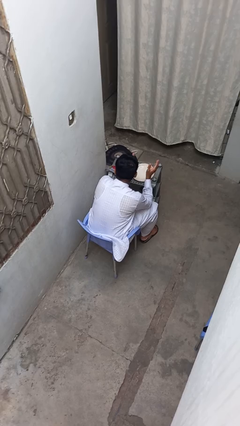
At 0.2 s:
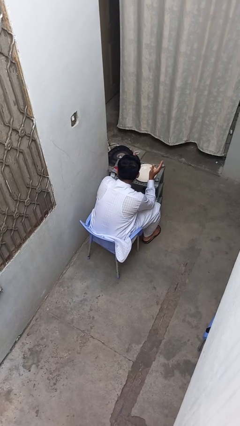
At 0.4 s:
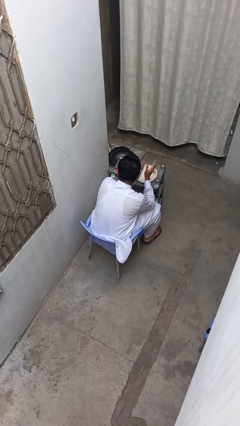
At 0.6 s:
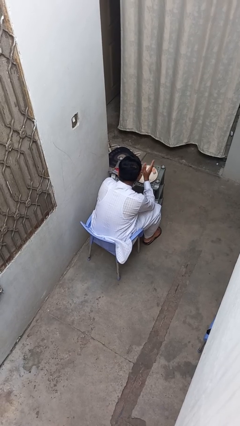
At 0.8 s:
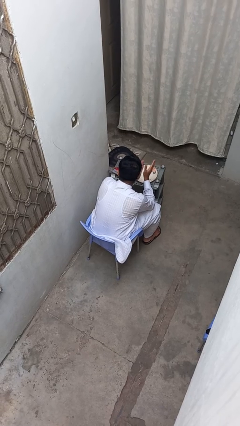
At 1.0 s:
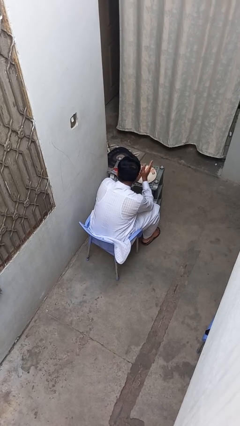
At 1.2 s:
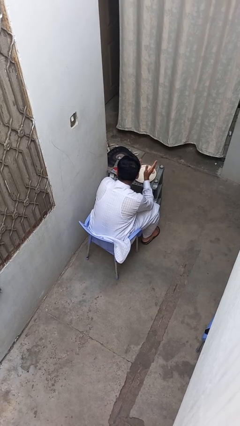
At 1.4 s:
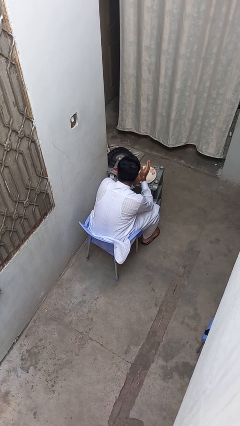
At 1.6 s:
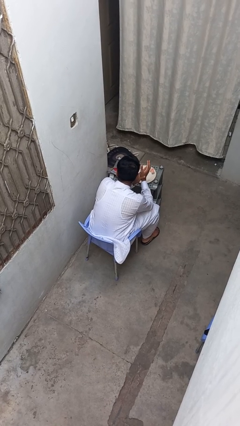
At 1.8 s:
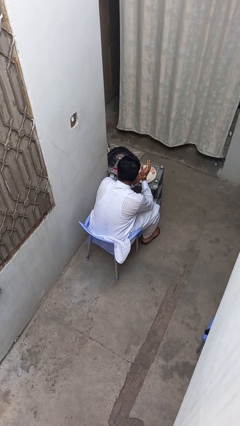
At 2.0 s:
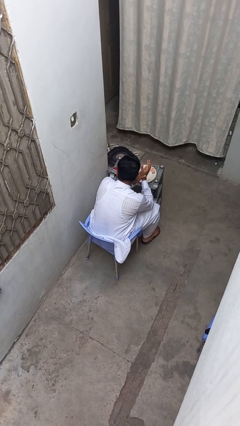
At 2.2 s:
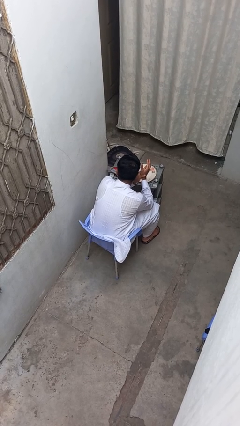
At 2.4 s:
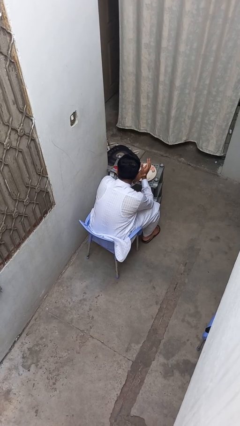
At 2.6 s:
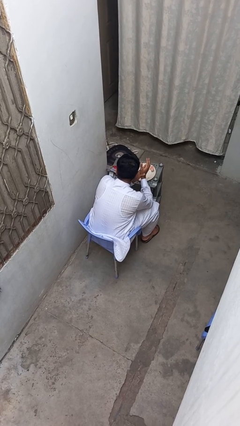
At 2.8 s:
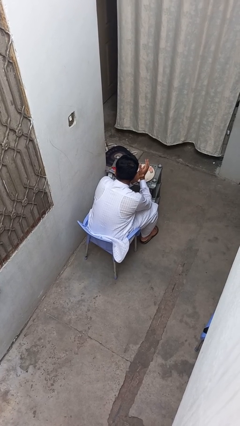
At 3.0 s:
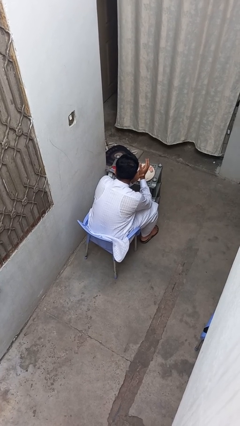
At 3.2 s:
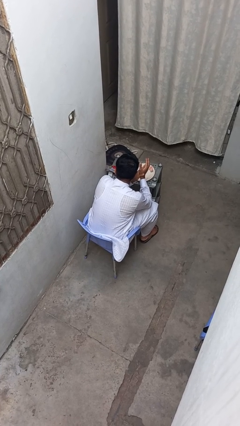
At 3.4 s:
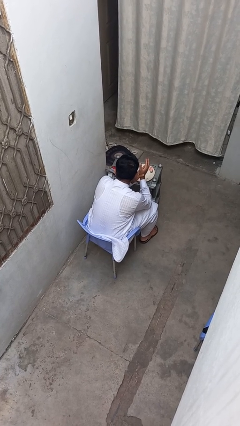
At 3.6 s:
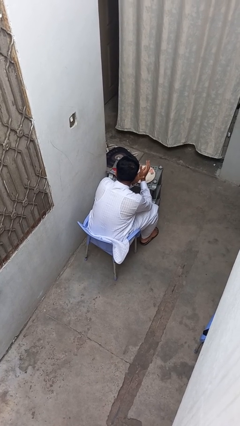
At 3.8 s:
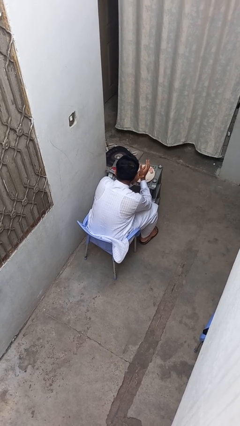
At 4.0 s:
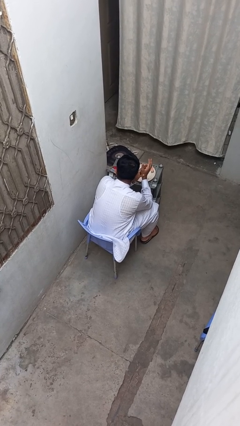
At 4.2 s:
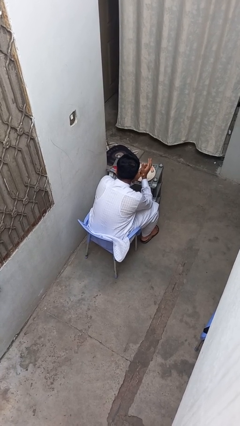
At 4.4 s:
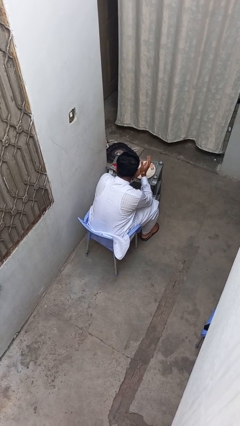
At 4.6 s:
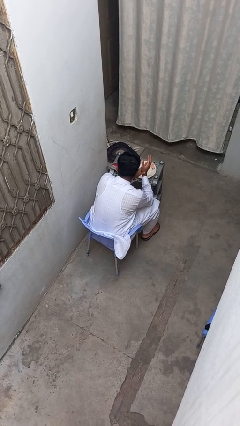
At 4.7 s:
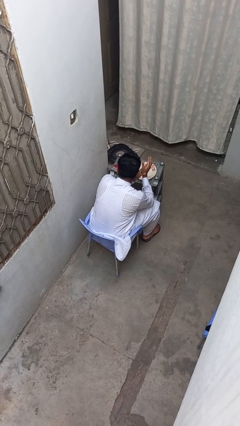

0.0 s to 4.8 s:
person claps hands

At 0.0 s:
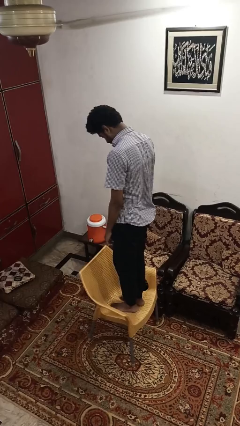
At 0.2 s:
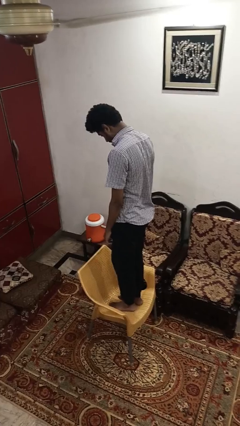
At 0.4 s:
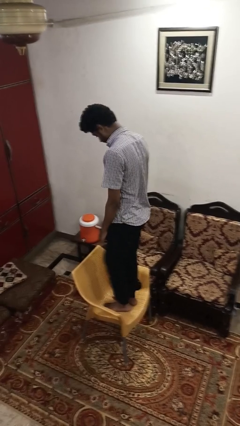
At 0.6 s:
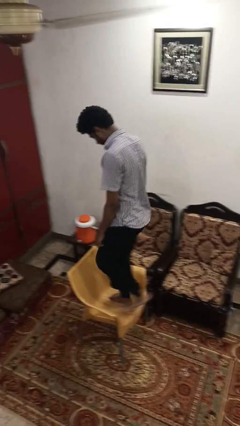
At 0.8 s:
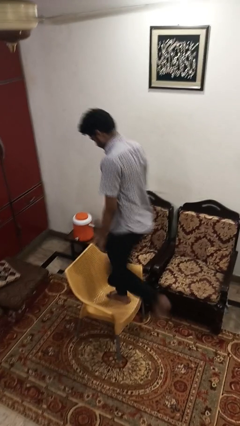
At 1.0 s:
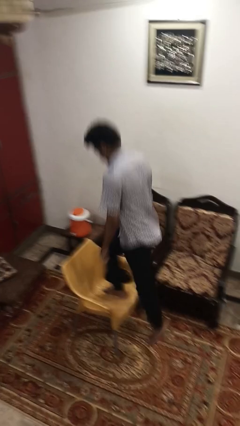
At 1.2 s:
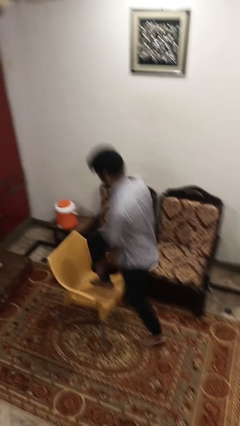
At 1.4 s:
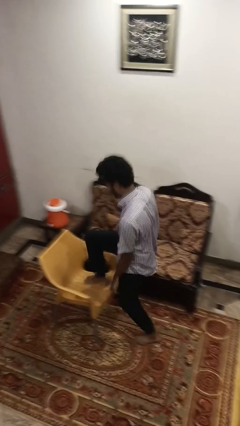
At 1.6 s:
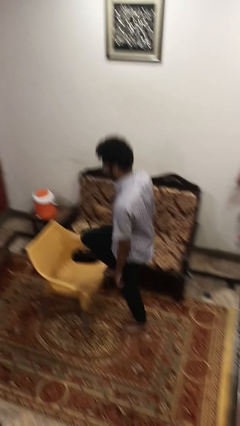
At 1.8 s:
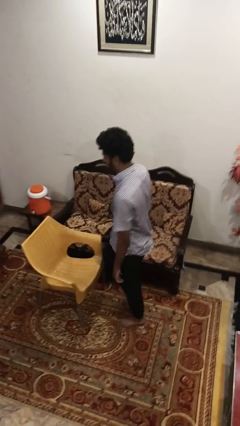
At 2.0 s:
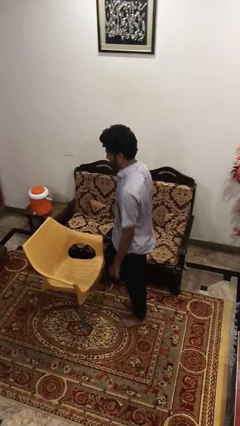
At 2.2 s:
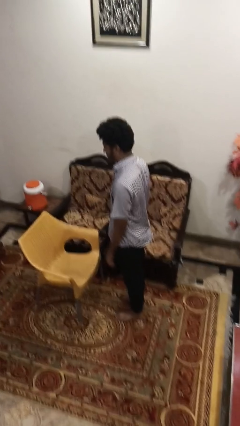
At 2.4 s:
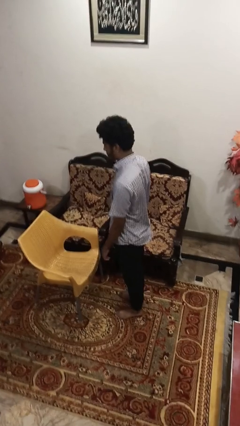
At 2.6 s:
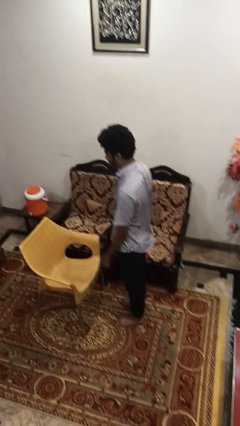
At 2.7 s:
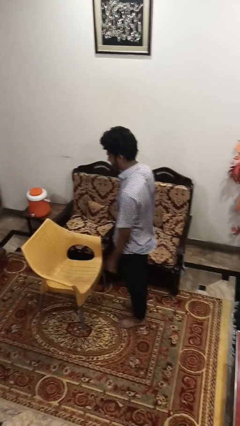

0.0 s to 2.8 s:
person climbs off chair

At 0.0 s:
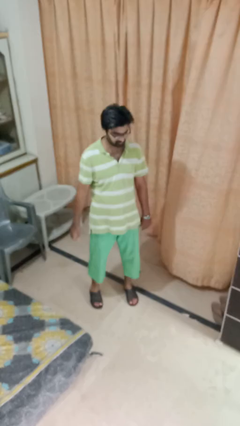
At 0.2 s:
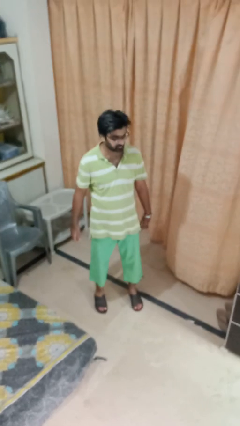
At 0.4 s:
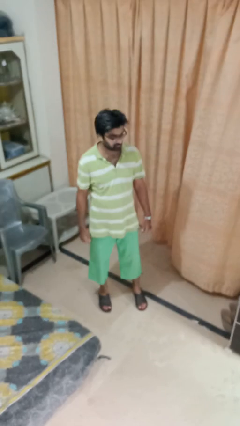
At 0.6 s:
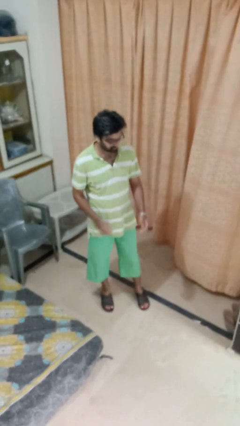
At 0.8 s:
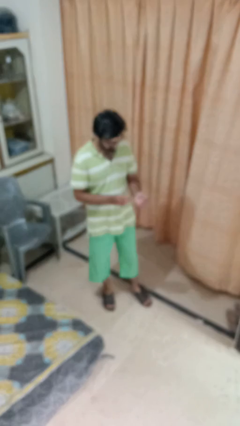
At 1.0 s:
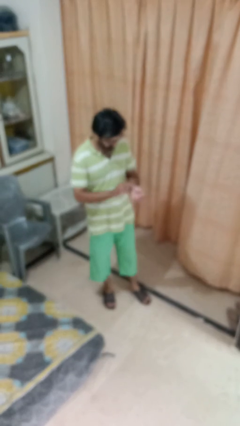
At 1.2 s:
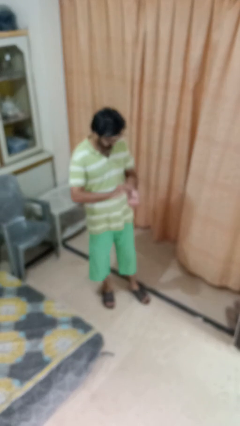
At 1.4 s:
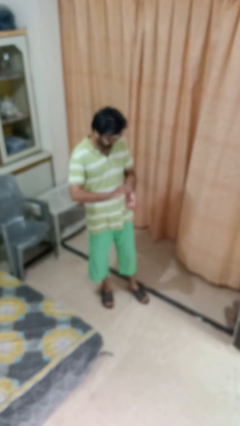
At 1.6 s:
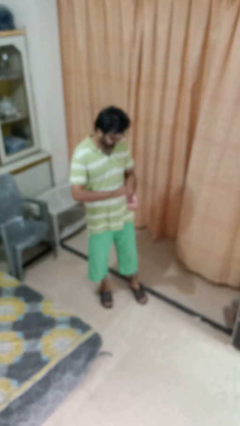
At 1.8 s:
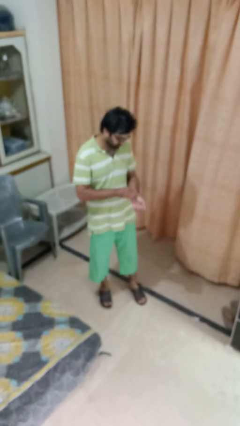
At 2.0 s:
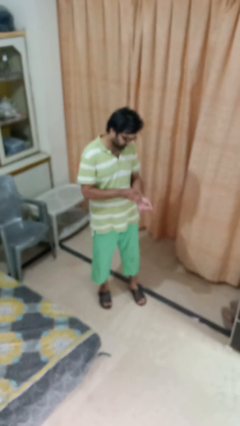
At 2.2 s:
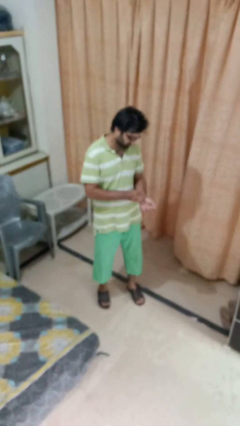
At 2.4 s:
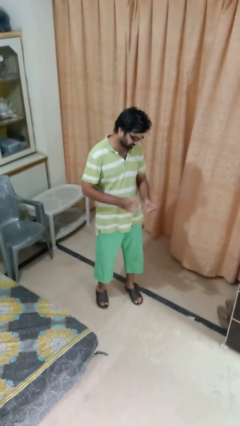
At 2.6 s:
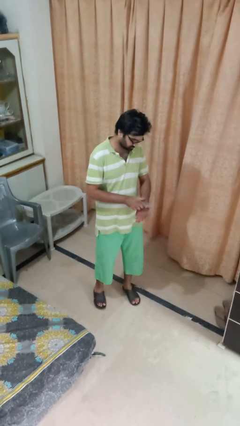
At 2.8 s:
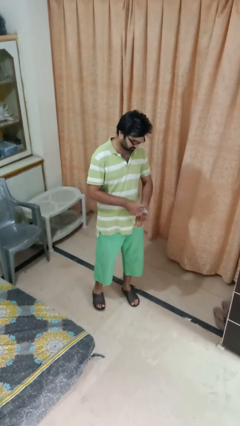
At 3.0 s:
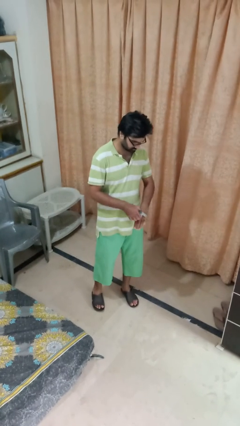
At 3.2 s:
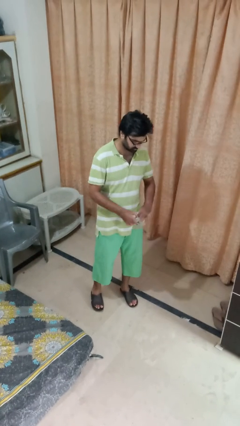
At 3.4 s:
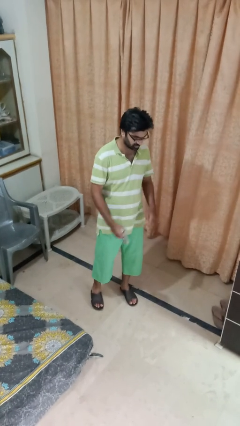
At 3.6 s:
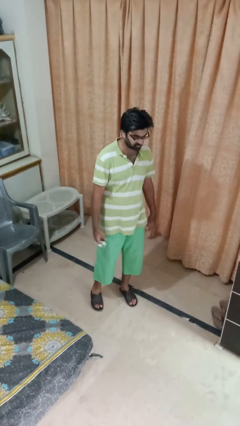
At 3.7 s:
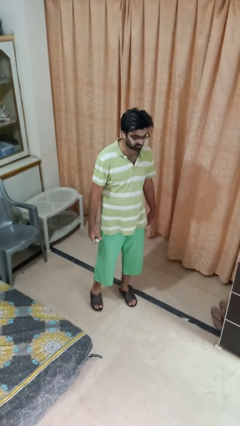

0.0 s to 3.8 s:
person takes off wristwatch

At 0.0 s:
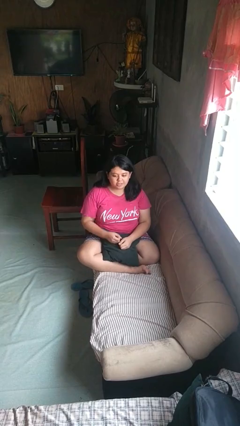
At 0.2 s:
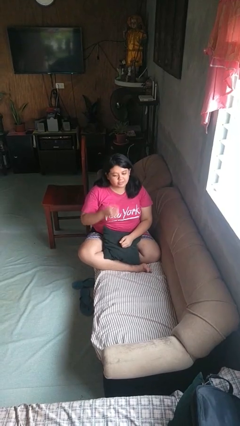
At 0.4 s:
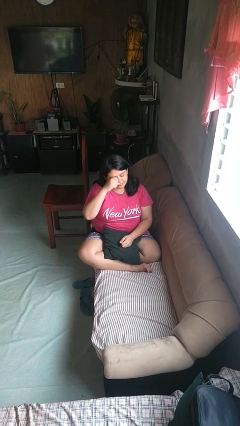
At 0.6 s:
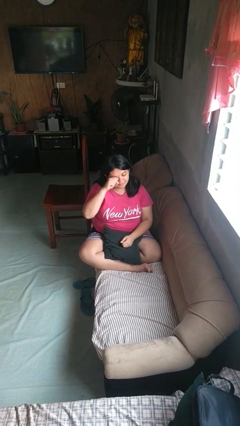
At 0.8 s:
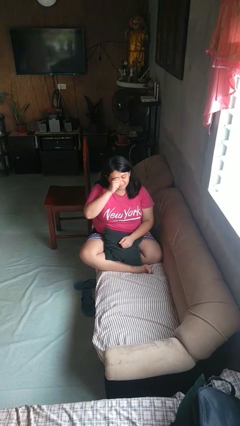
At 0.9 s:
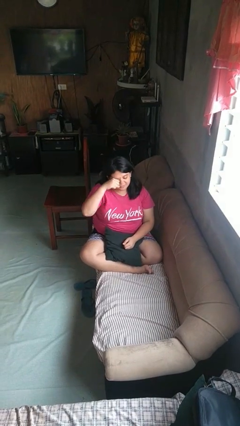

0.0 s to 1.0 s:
person rubs eyes

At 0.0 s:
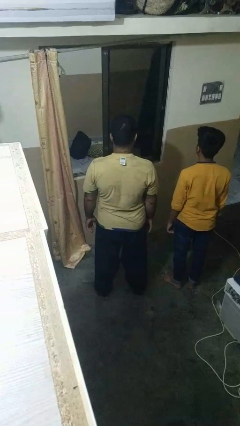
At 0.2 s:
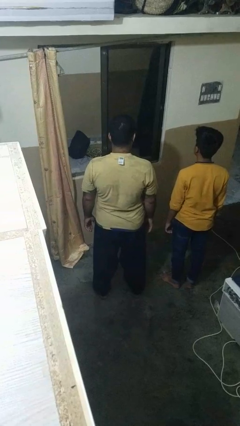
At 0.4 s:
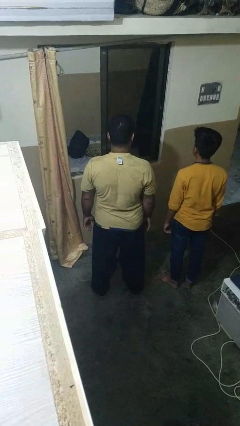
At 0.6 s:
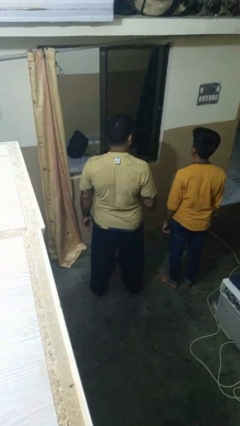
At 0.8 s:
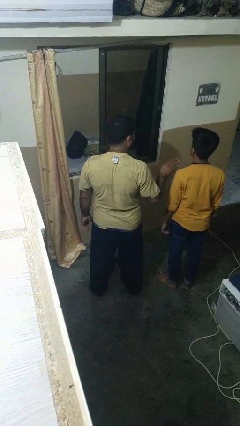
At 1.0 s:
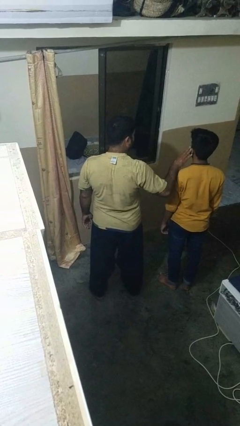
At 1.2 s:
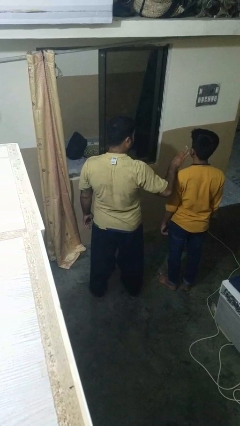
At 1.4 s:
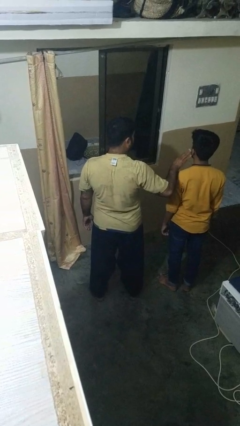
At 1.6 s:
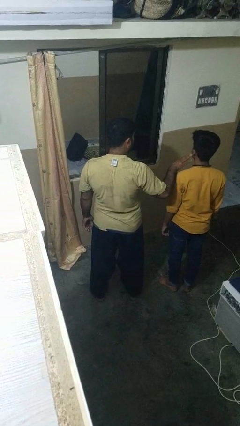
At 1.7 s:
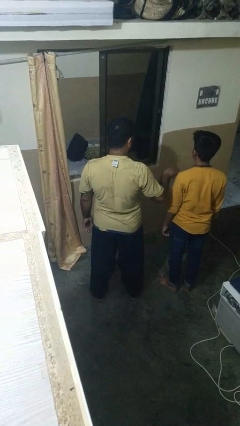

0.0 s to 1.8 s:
person touches face of person

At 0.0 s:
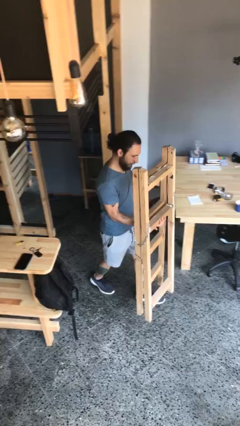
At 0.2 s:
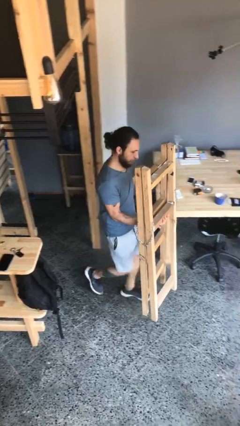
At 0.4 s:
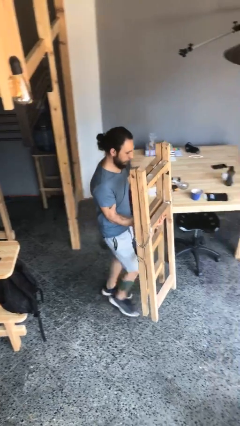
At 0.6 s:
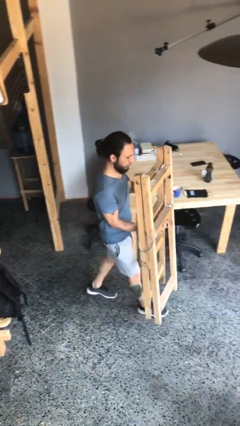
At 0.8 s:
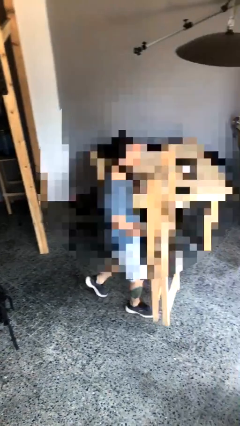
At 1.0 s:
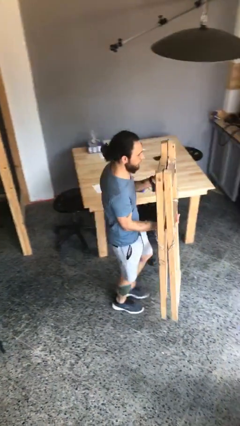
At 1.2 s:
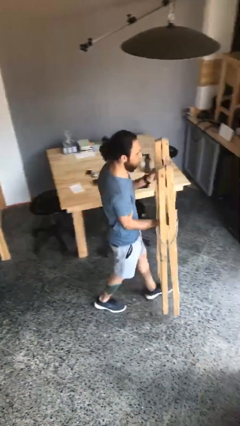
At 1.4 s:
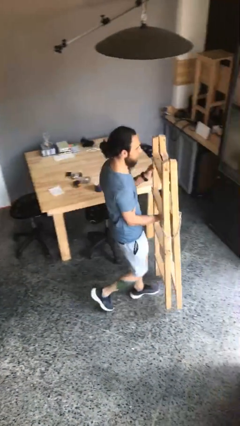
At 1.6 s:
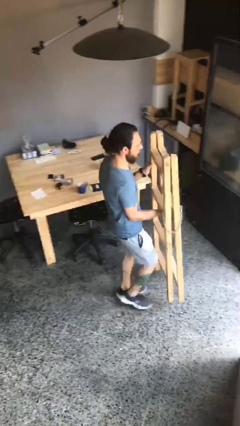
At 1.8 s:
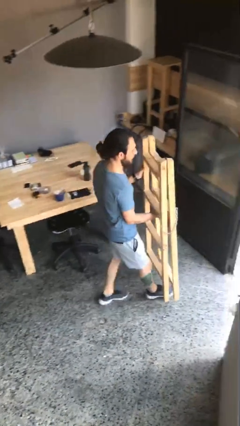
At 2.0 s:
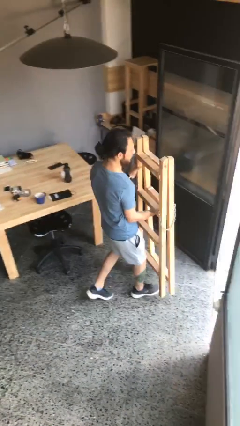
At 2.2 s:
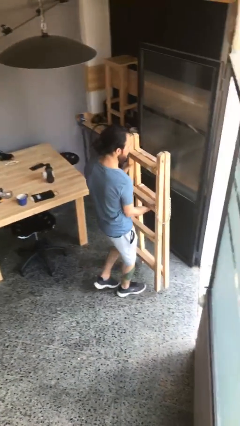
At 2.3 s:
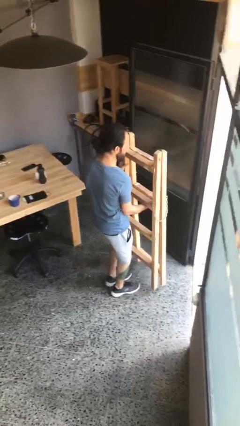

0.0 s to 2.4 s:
person carries heavy object

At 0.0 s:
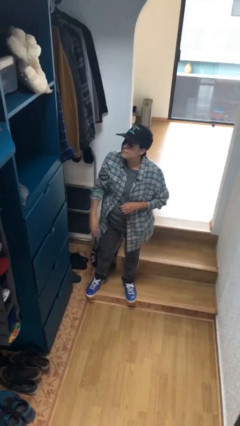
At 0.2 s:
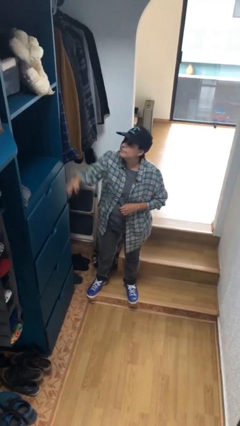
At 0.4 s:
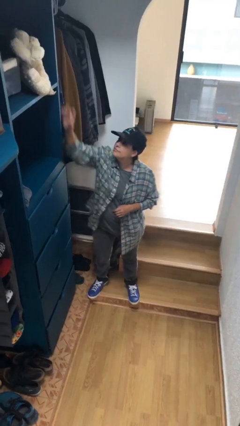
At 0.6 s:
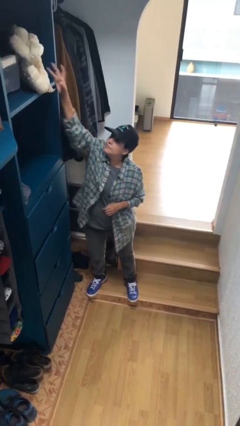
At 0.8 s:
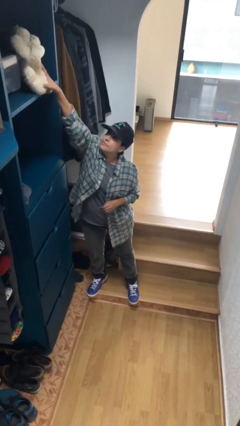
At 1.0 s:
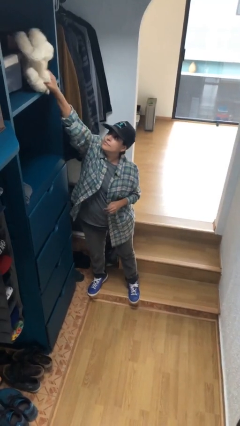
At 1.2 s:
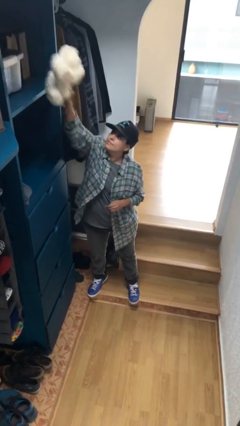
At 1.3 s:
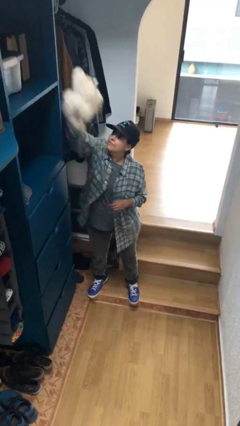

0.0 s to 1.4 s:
person picks up object from shelf
